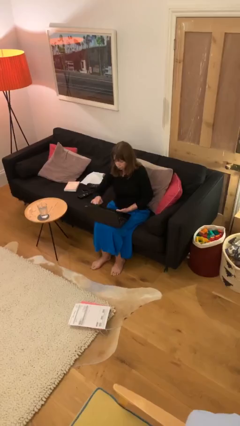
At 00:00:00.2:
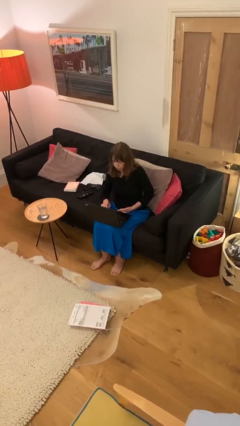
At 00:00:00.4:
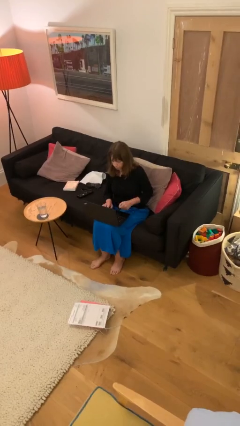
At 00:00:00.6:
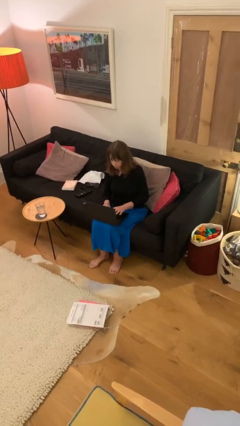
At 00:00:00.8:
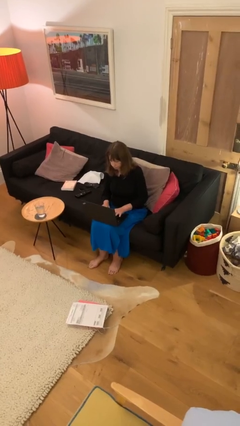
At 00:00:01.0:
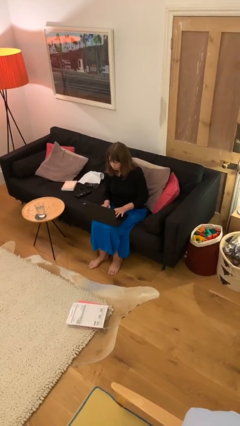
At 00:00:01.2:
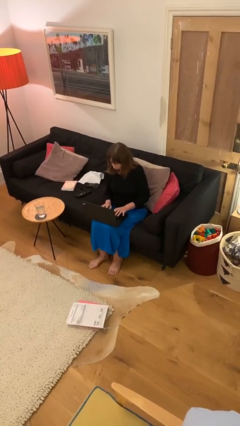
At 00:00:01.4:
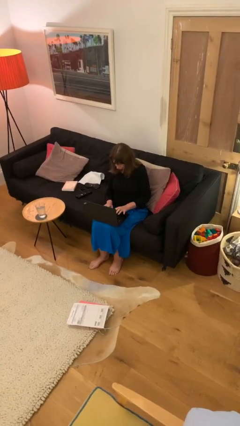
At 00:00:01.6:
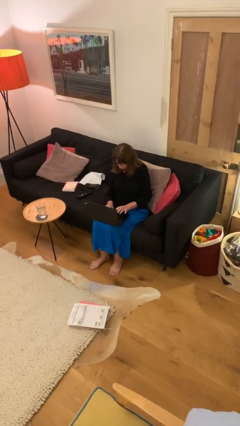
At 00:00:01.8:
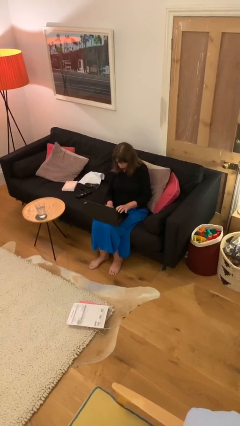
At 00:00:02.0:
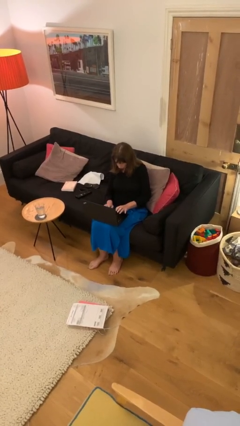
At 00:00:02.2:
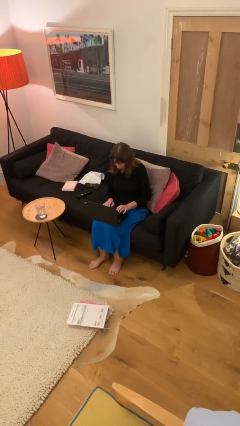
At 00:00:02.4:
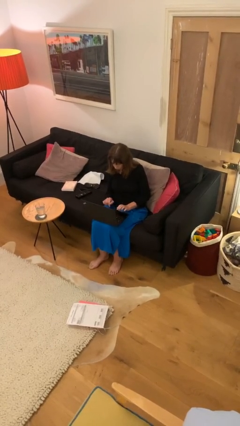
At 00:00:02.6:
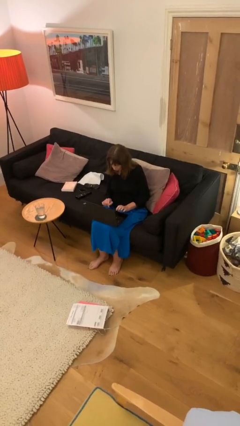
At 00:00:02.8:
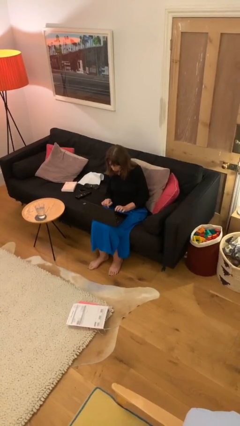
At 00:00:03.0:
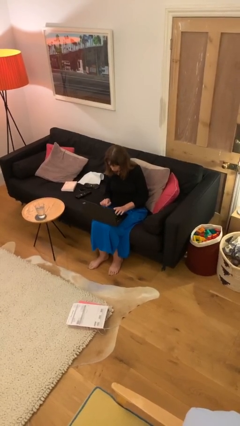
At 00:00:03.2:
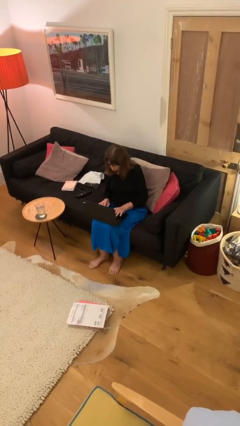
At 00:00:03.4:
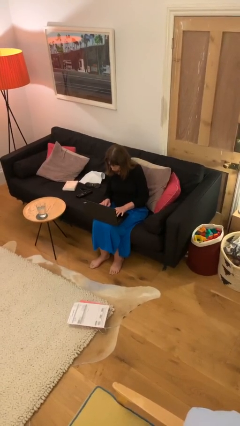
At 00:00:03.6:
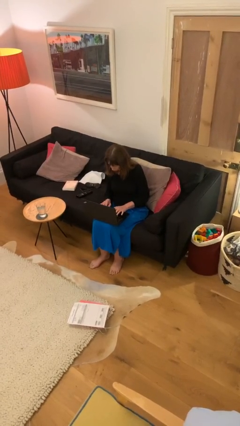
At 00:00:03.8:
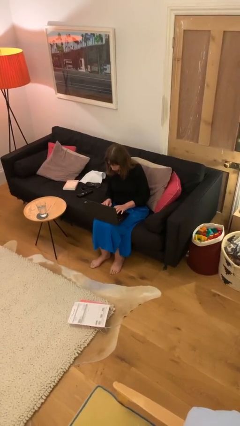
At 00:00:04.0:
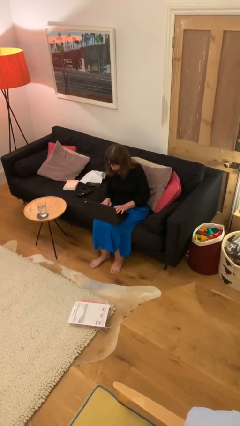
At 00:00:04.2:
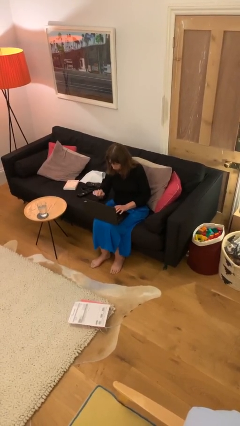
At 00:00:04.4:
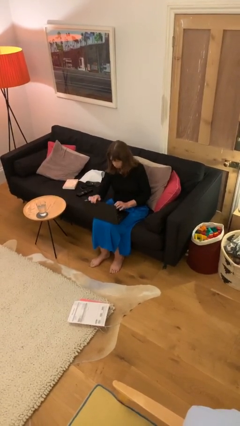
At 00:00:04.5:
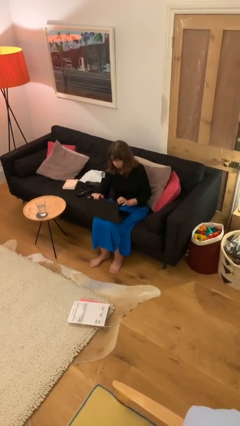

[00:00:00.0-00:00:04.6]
person interacts with laptop

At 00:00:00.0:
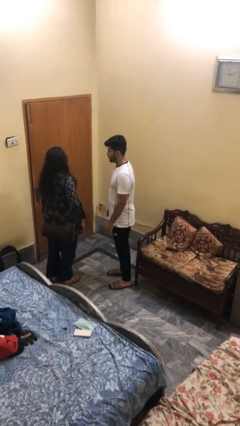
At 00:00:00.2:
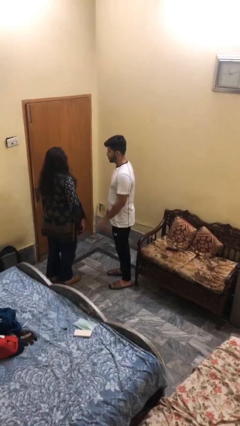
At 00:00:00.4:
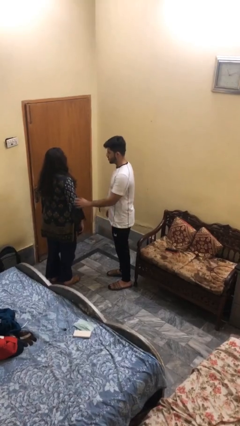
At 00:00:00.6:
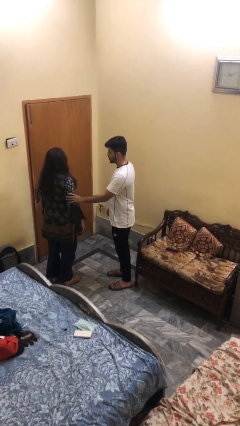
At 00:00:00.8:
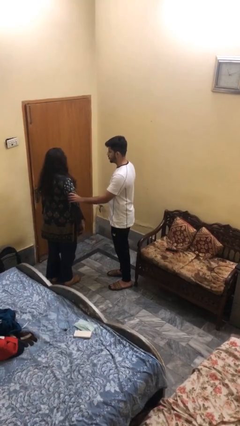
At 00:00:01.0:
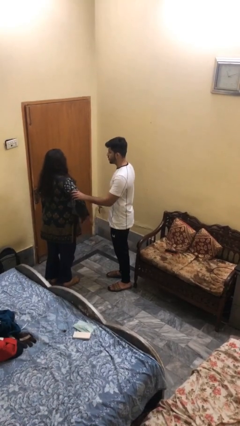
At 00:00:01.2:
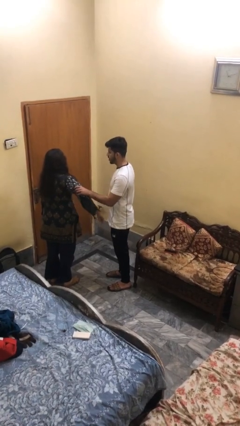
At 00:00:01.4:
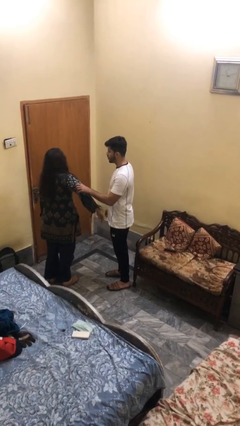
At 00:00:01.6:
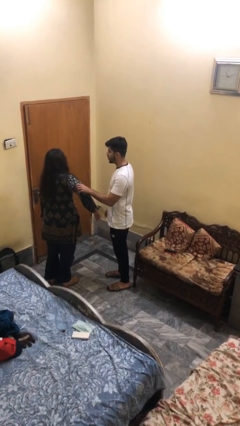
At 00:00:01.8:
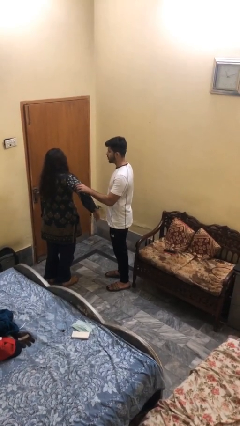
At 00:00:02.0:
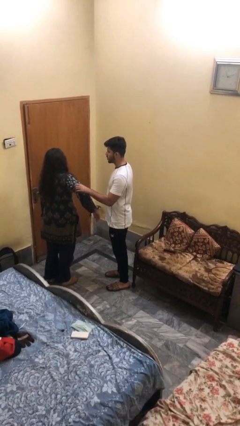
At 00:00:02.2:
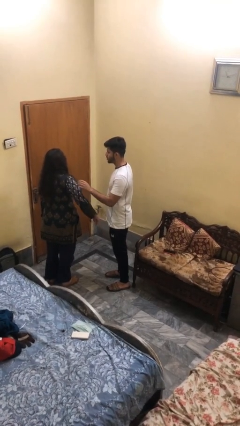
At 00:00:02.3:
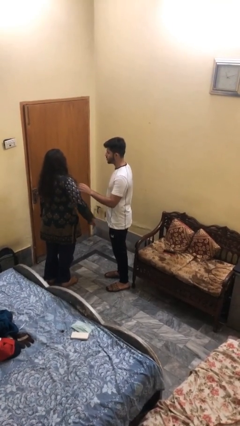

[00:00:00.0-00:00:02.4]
person grabs person by bicep

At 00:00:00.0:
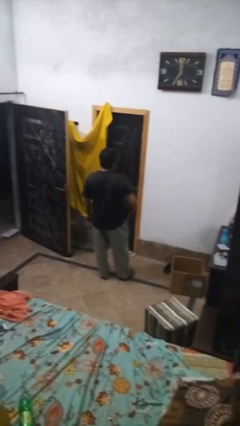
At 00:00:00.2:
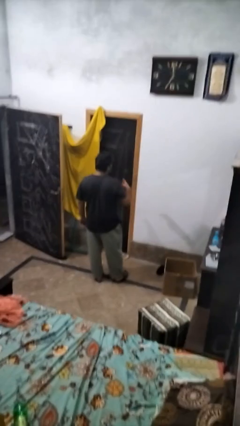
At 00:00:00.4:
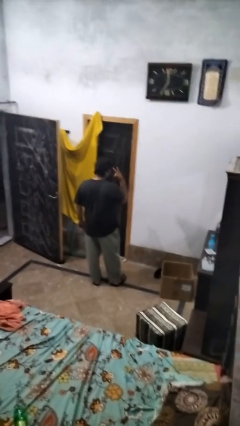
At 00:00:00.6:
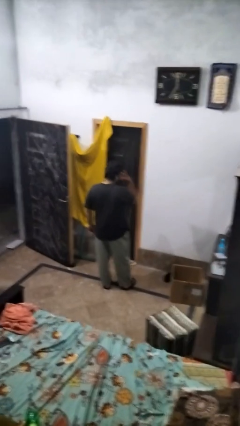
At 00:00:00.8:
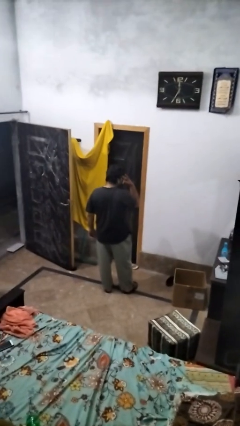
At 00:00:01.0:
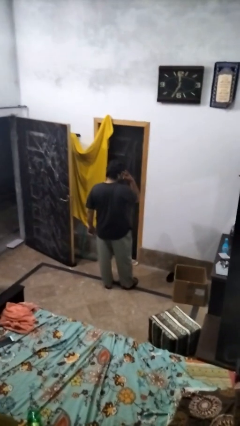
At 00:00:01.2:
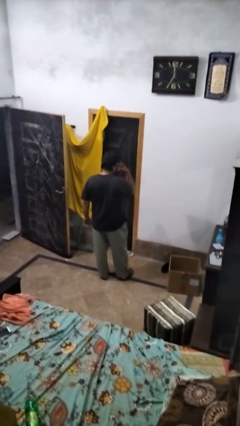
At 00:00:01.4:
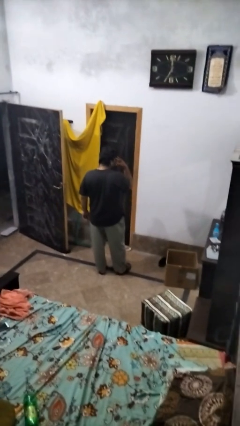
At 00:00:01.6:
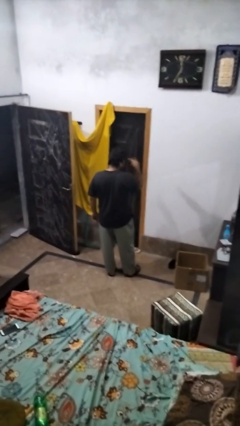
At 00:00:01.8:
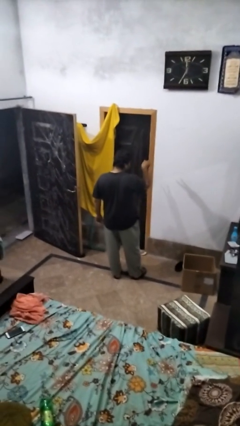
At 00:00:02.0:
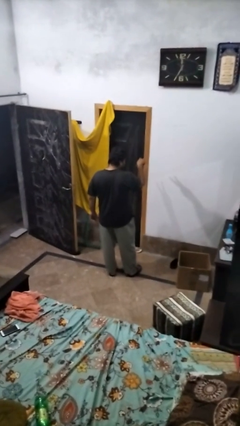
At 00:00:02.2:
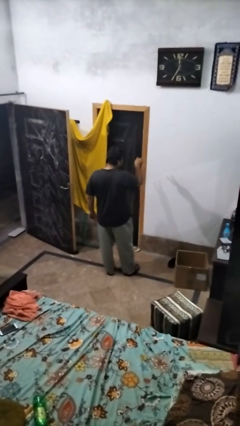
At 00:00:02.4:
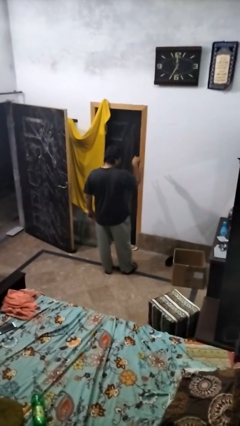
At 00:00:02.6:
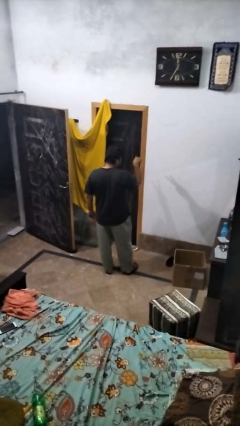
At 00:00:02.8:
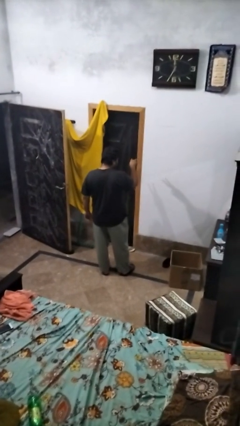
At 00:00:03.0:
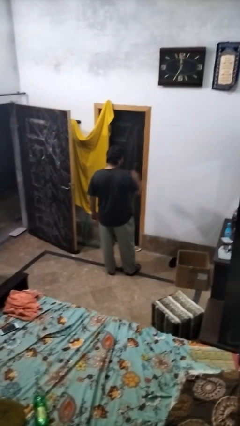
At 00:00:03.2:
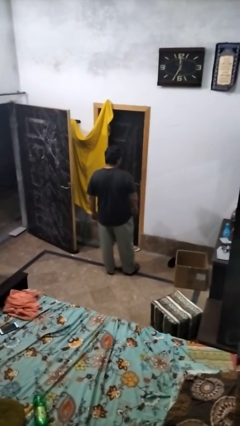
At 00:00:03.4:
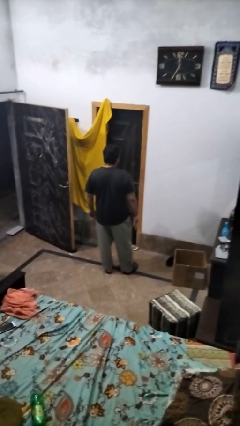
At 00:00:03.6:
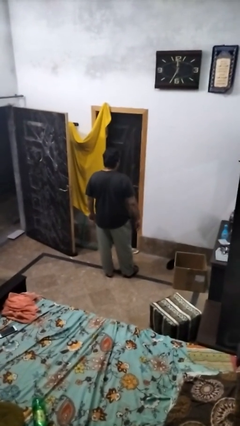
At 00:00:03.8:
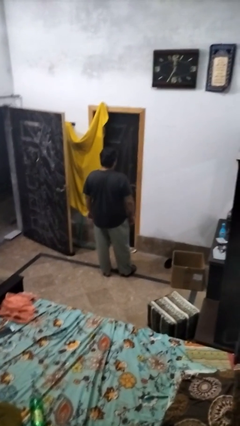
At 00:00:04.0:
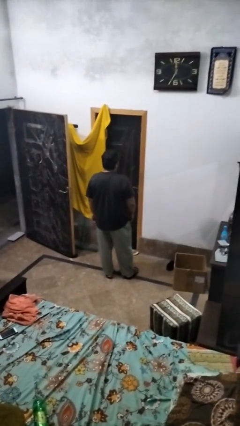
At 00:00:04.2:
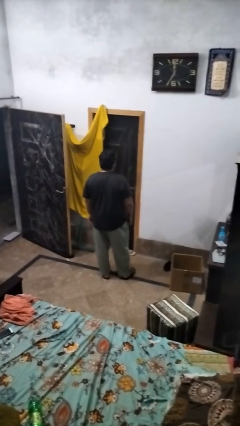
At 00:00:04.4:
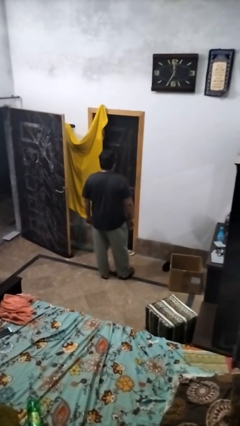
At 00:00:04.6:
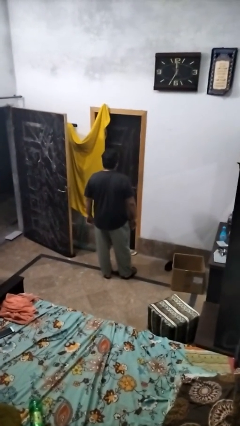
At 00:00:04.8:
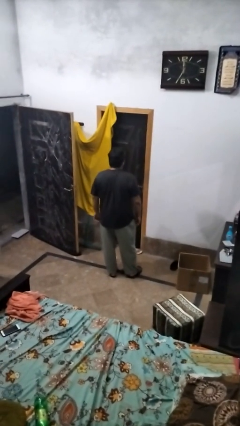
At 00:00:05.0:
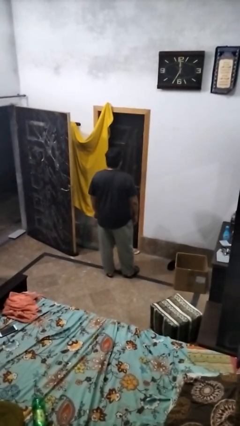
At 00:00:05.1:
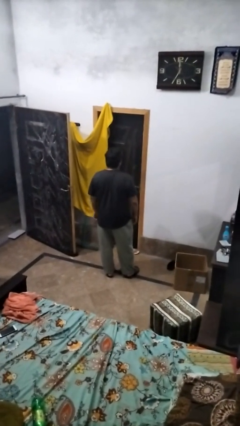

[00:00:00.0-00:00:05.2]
person gestures watch closely

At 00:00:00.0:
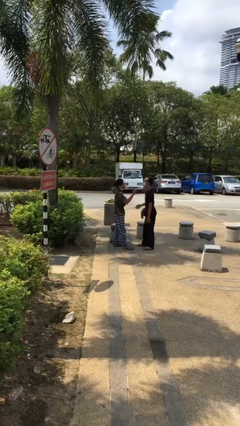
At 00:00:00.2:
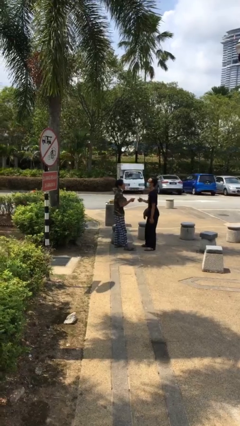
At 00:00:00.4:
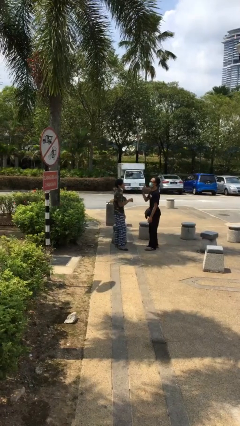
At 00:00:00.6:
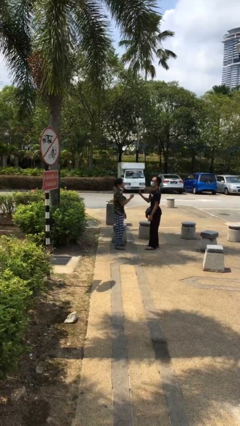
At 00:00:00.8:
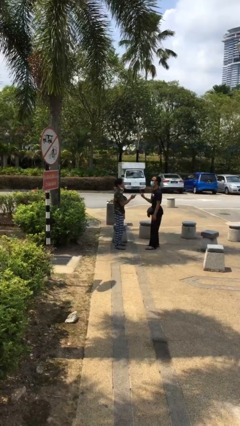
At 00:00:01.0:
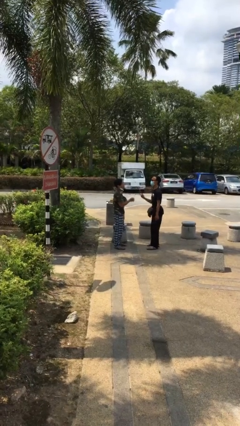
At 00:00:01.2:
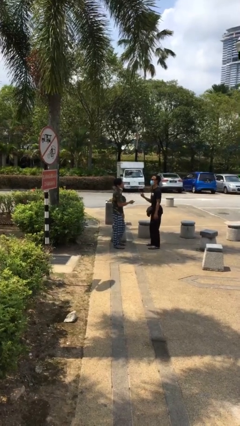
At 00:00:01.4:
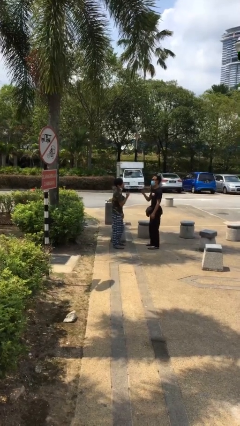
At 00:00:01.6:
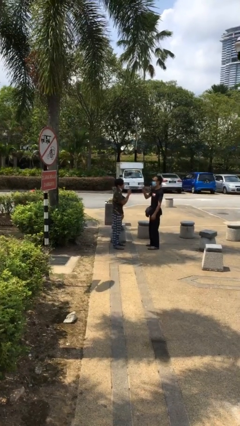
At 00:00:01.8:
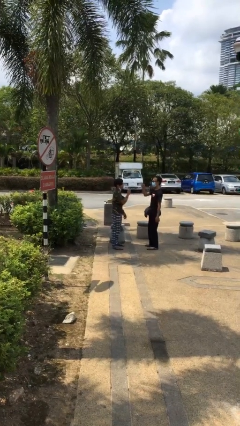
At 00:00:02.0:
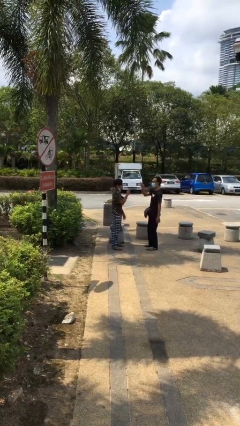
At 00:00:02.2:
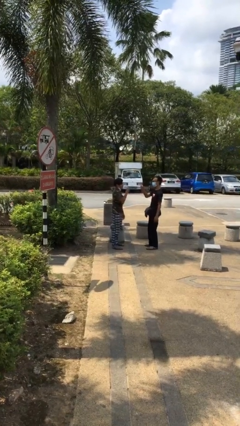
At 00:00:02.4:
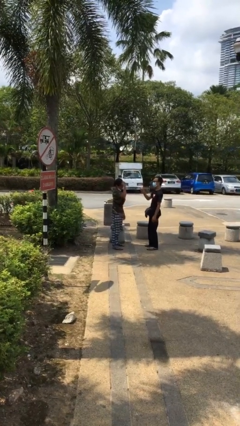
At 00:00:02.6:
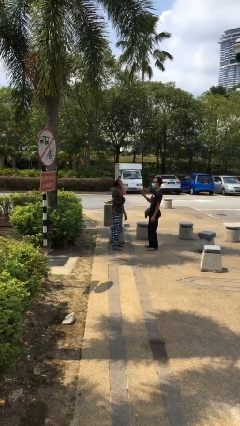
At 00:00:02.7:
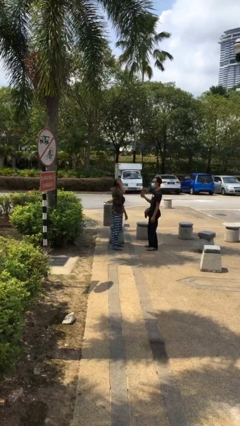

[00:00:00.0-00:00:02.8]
person talks to person

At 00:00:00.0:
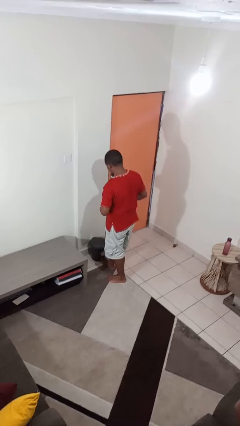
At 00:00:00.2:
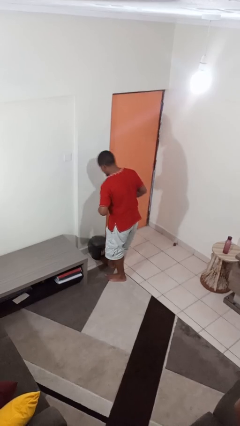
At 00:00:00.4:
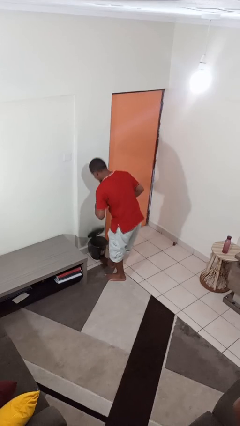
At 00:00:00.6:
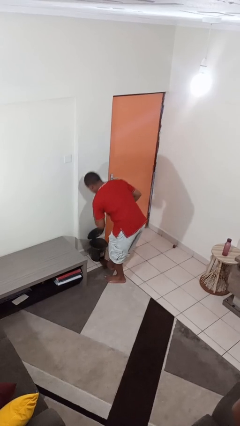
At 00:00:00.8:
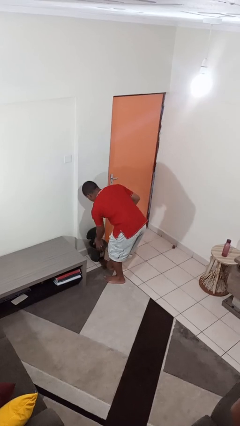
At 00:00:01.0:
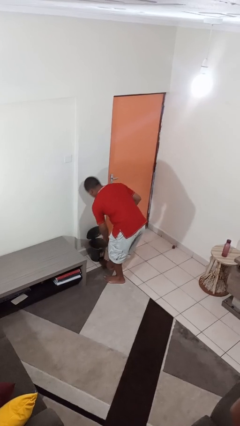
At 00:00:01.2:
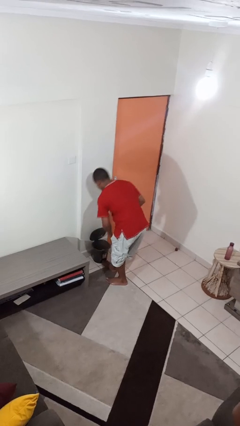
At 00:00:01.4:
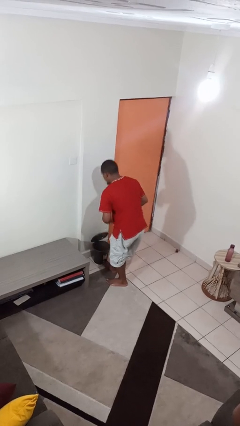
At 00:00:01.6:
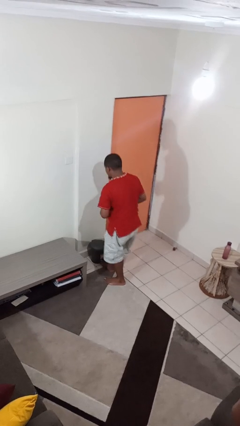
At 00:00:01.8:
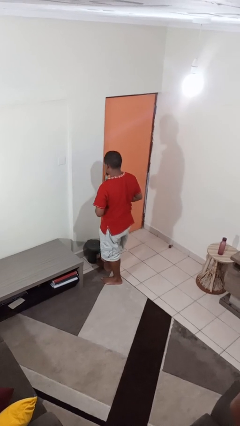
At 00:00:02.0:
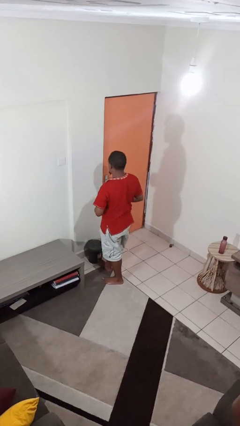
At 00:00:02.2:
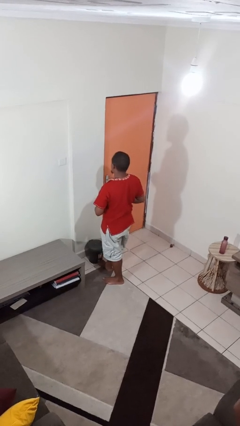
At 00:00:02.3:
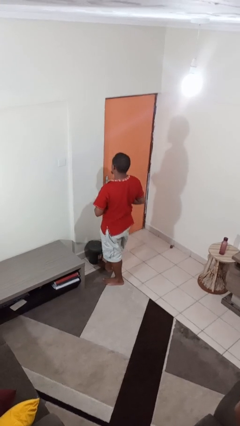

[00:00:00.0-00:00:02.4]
person discards trash
